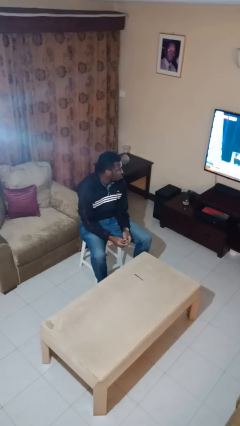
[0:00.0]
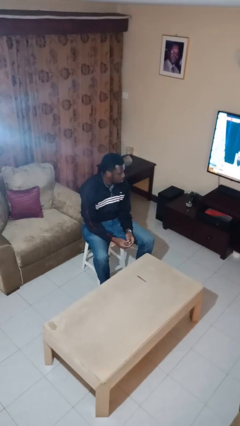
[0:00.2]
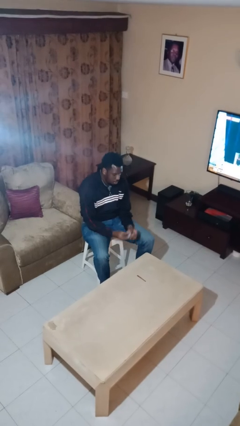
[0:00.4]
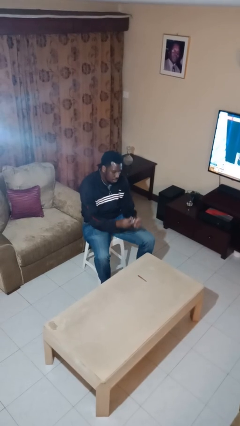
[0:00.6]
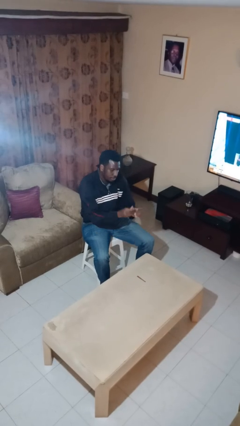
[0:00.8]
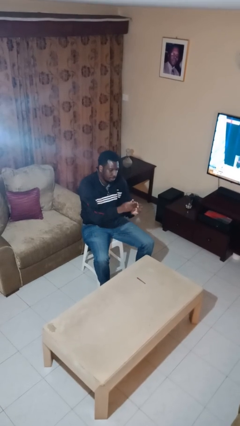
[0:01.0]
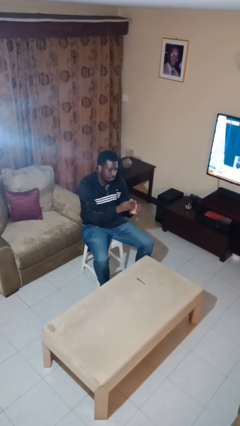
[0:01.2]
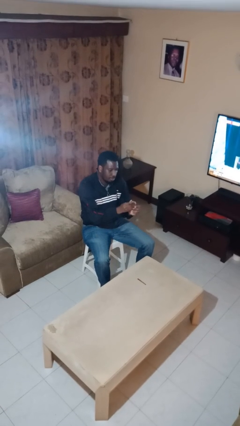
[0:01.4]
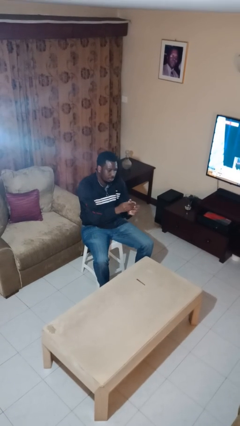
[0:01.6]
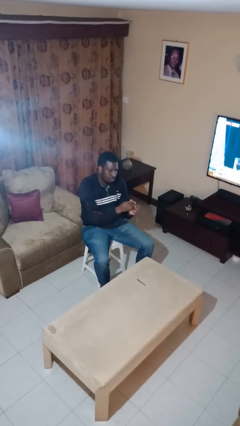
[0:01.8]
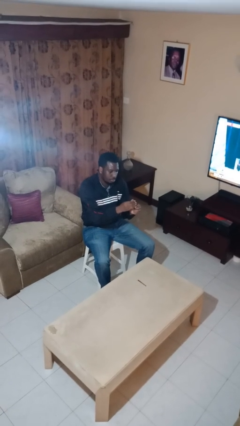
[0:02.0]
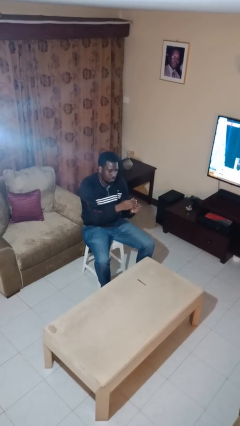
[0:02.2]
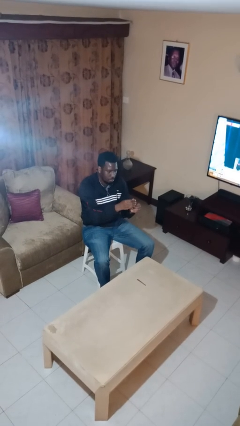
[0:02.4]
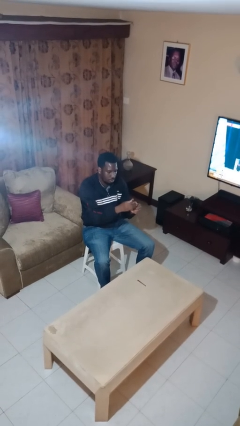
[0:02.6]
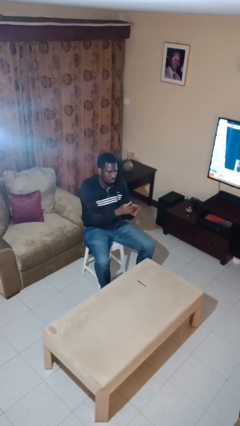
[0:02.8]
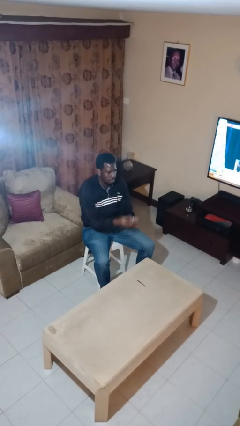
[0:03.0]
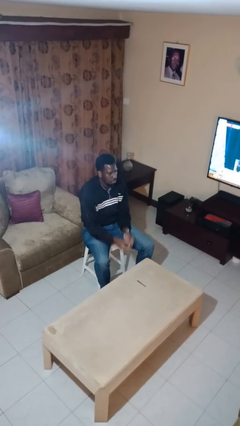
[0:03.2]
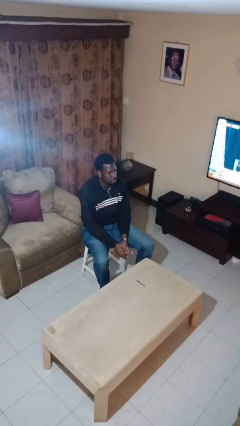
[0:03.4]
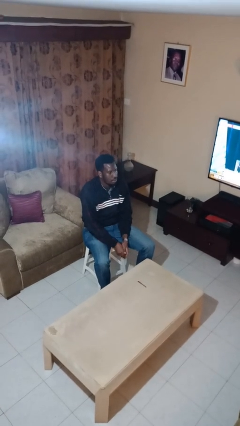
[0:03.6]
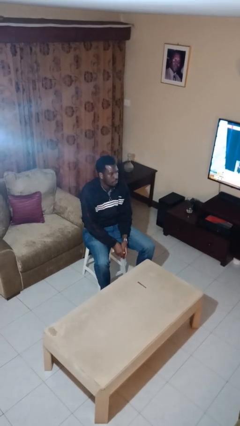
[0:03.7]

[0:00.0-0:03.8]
person clips fingernails

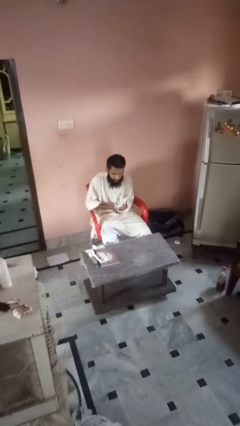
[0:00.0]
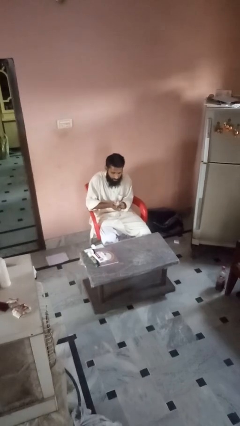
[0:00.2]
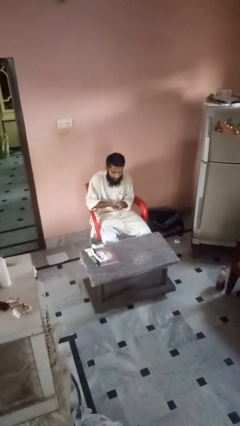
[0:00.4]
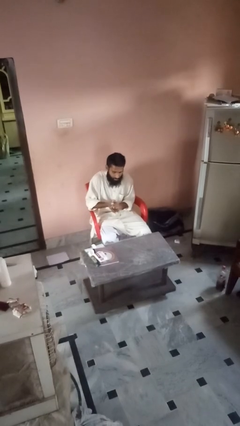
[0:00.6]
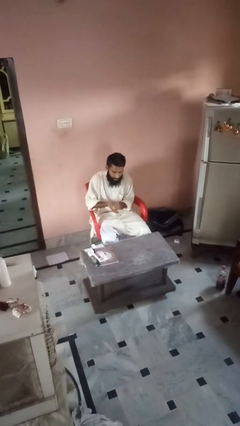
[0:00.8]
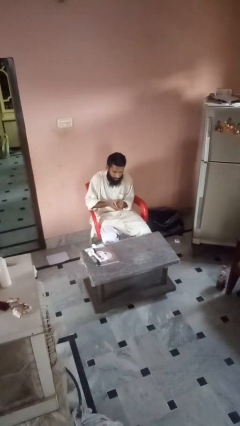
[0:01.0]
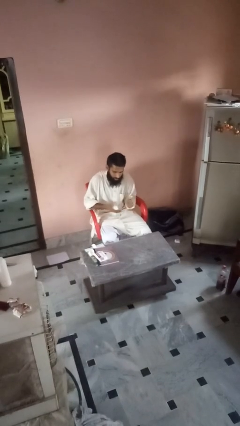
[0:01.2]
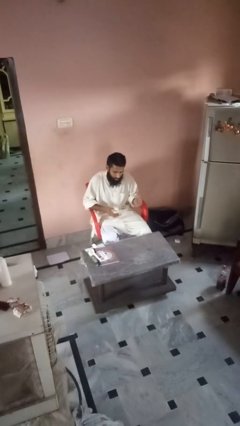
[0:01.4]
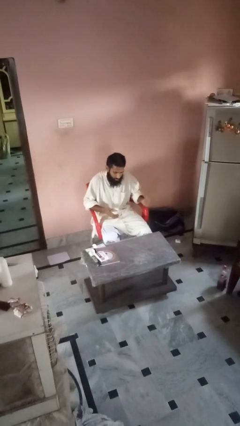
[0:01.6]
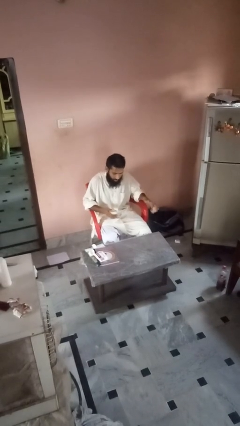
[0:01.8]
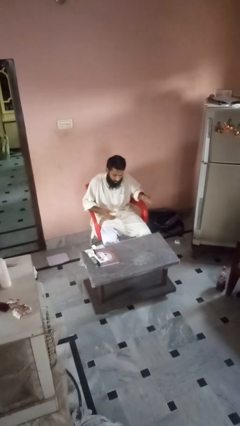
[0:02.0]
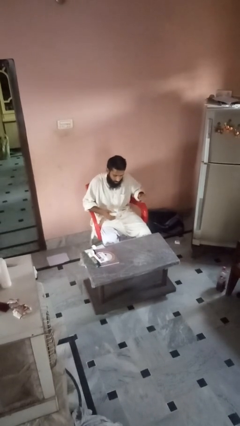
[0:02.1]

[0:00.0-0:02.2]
person crumples paper

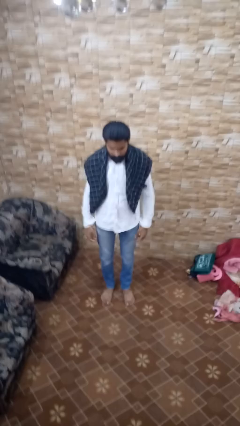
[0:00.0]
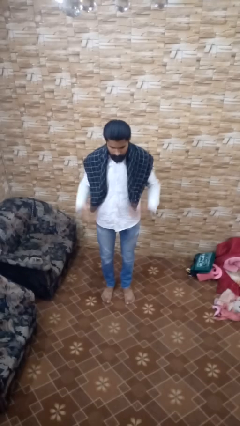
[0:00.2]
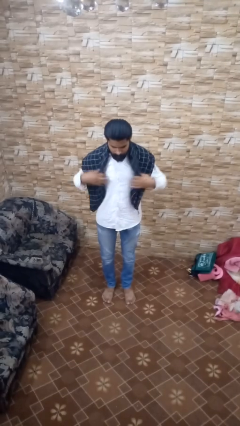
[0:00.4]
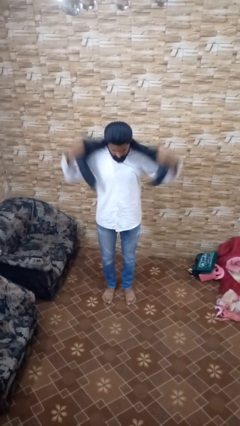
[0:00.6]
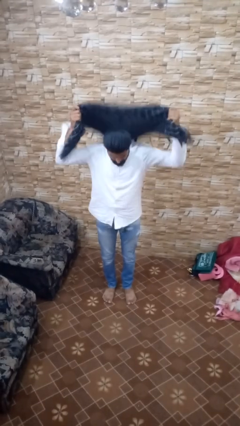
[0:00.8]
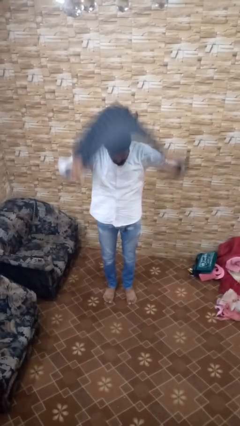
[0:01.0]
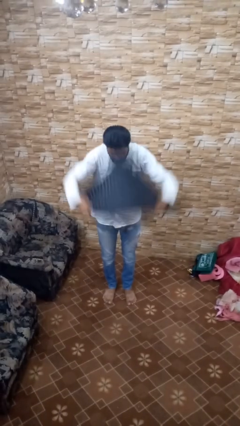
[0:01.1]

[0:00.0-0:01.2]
person takes off scarf

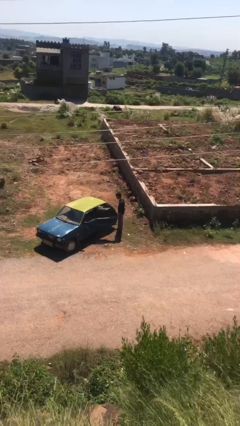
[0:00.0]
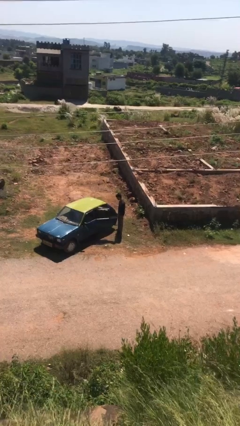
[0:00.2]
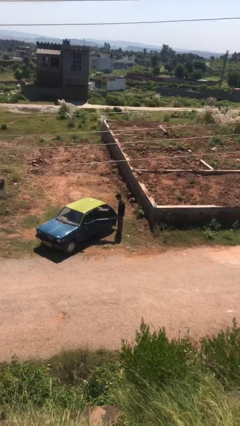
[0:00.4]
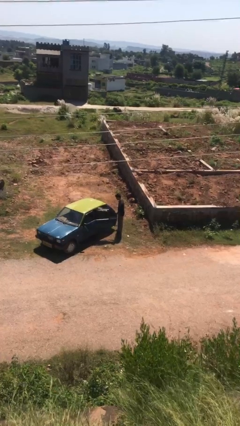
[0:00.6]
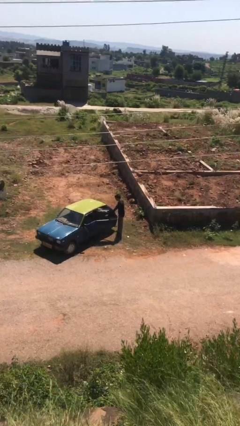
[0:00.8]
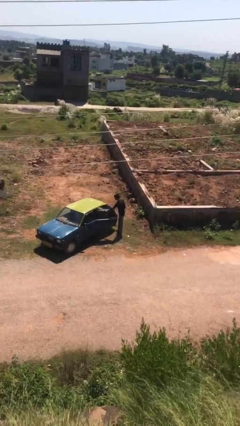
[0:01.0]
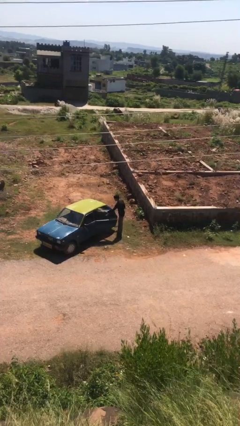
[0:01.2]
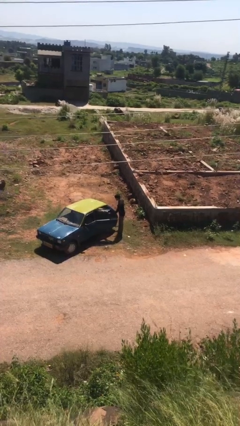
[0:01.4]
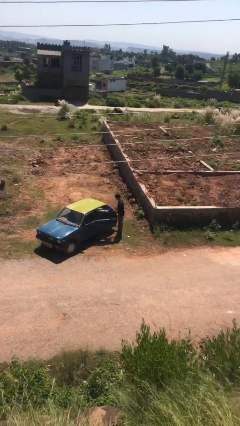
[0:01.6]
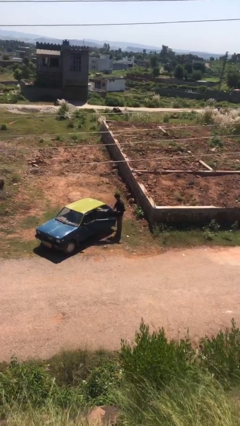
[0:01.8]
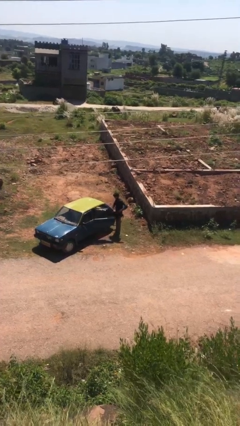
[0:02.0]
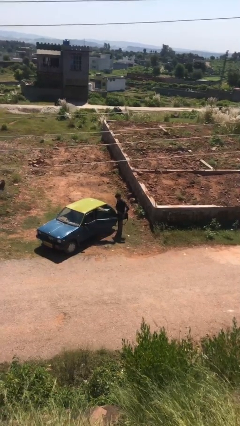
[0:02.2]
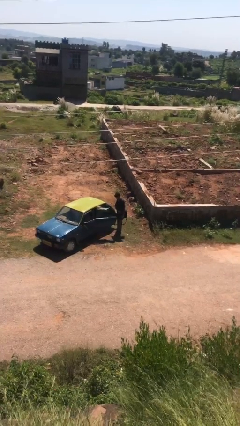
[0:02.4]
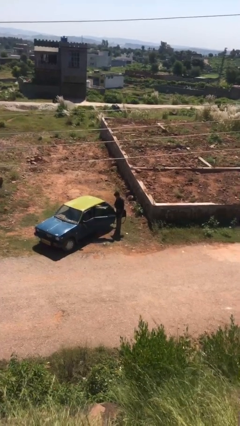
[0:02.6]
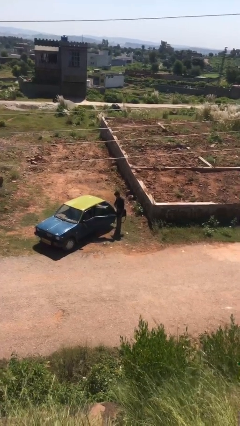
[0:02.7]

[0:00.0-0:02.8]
person unloads car

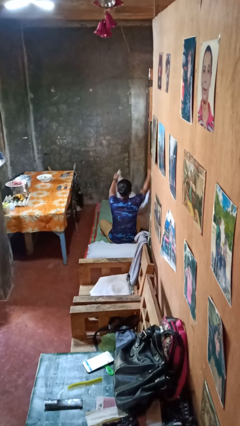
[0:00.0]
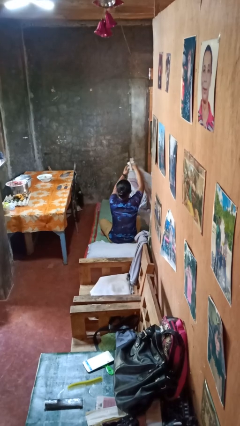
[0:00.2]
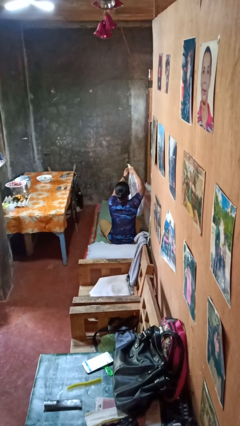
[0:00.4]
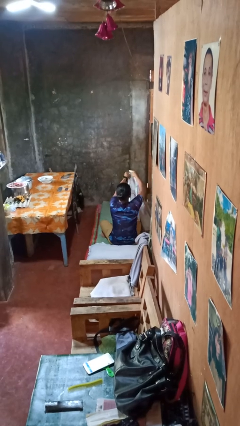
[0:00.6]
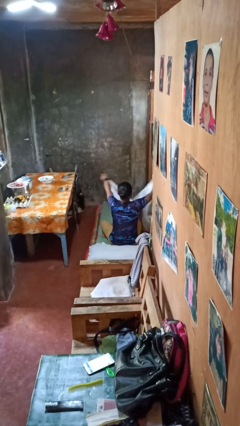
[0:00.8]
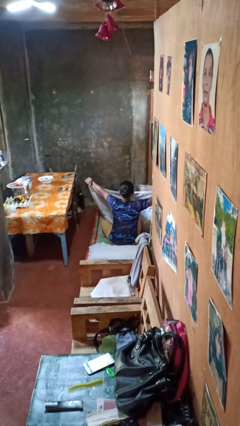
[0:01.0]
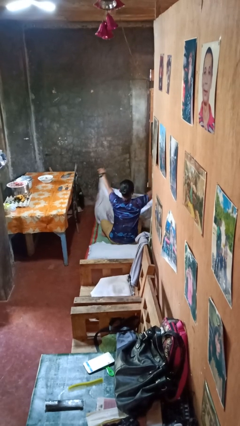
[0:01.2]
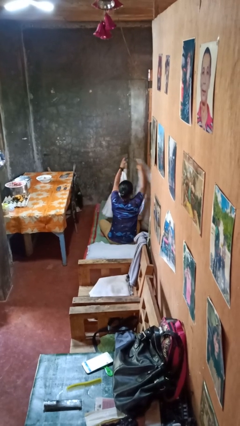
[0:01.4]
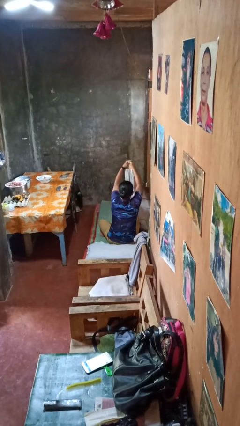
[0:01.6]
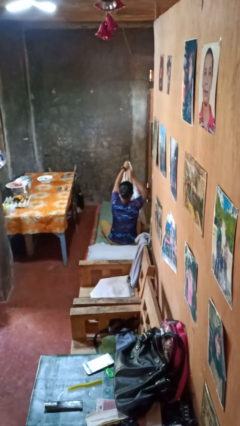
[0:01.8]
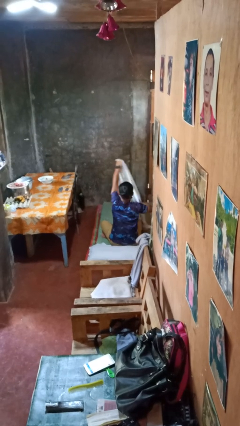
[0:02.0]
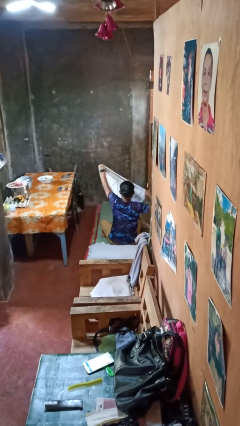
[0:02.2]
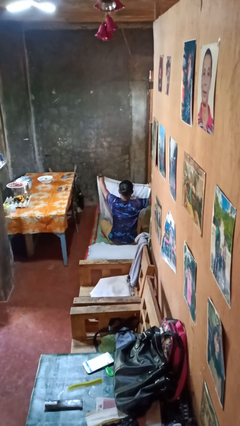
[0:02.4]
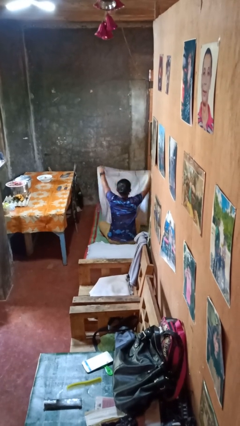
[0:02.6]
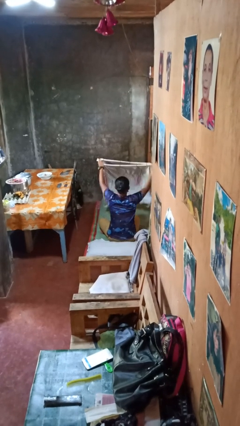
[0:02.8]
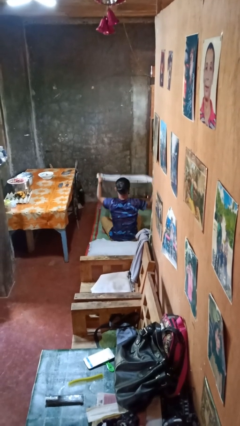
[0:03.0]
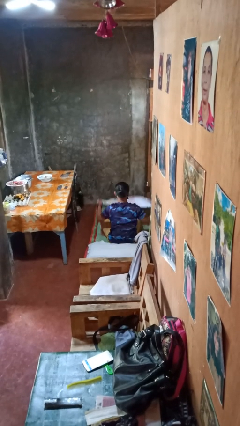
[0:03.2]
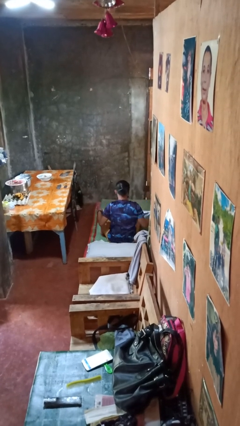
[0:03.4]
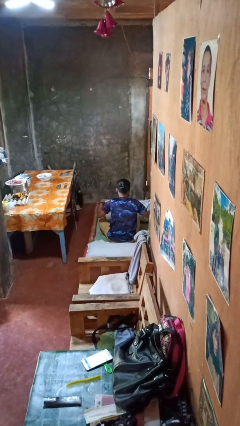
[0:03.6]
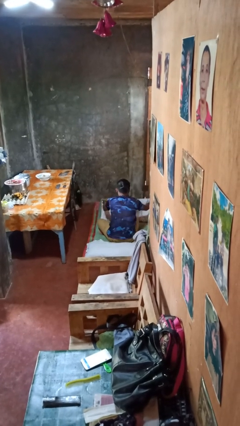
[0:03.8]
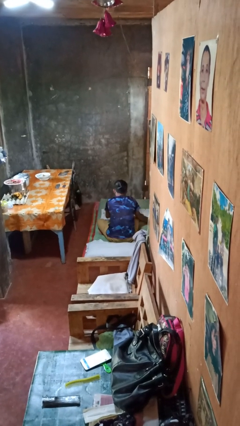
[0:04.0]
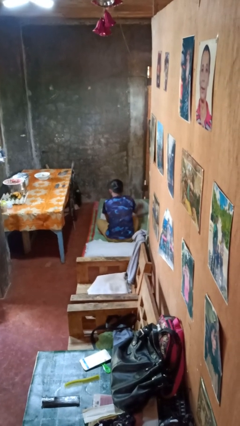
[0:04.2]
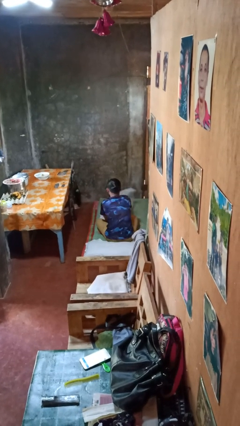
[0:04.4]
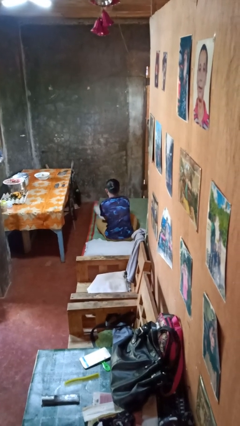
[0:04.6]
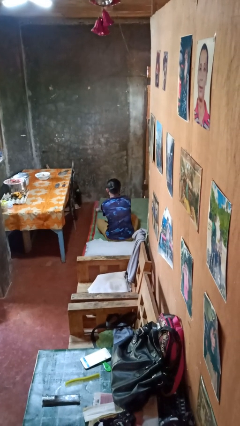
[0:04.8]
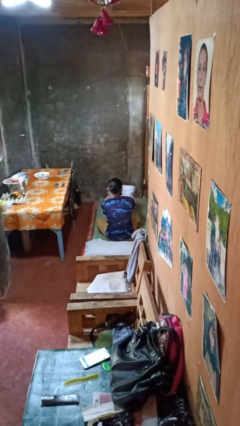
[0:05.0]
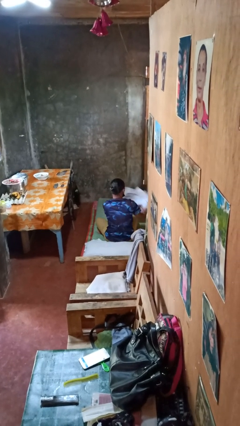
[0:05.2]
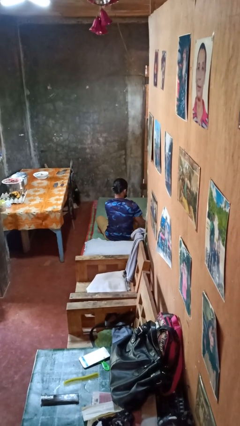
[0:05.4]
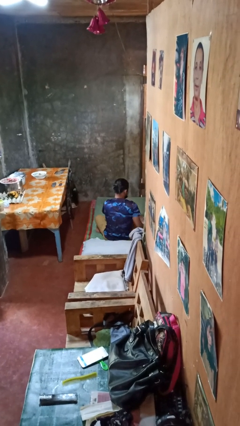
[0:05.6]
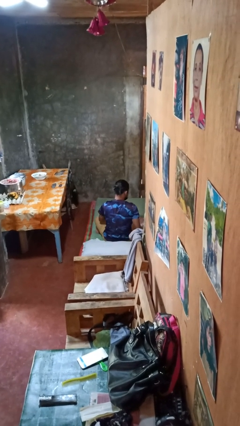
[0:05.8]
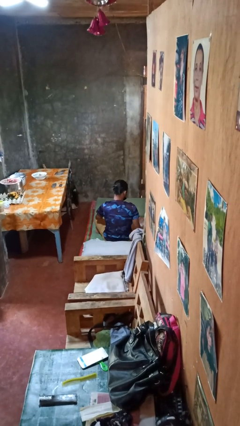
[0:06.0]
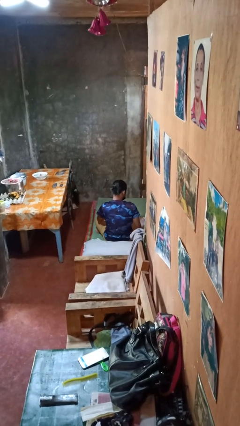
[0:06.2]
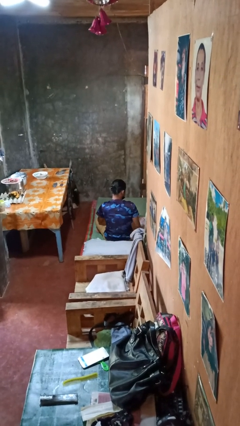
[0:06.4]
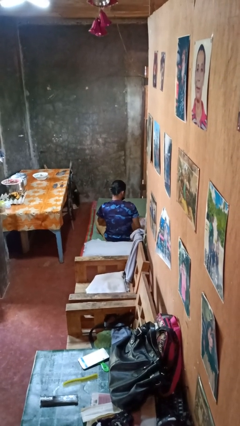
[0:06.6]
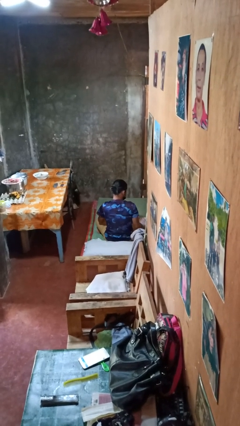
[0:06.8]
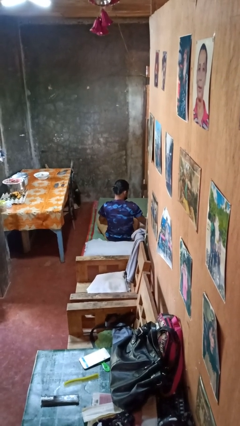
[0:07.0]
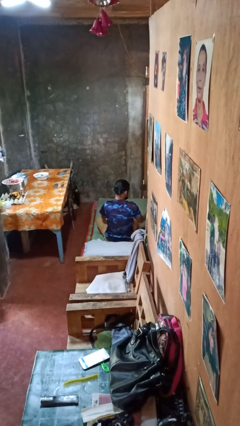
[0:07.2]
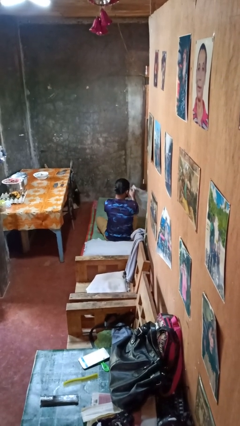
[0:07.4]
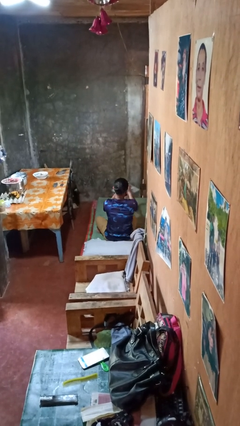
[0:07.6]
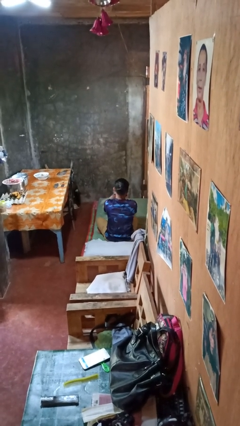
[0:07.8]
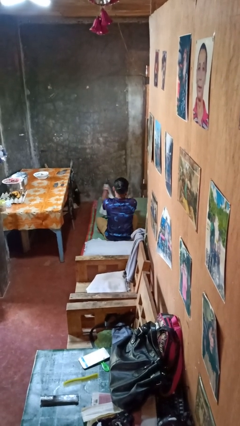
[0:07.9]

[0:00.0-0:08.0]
person folds blanket
